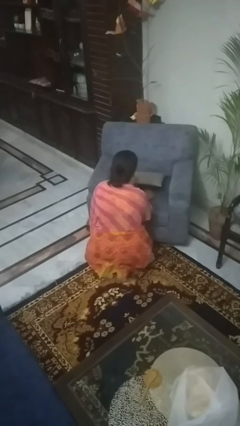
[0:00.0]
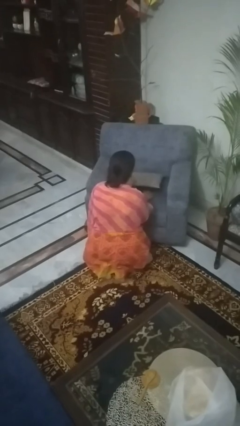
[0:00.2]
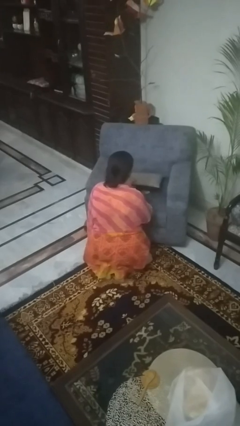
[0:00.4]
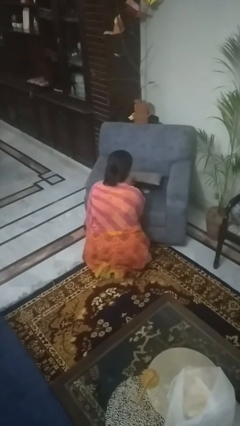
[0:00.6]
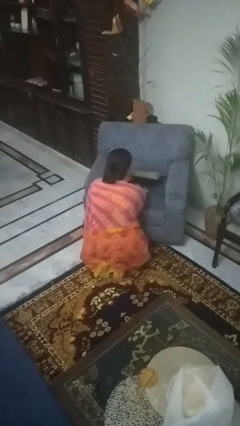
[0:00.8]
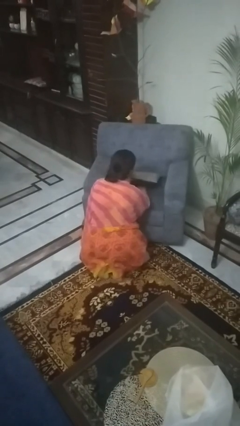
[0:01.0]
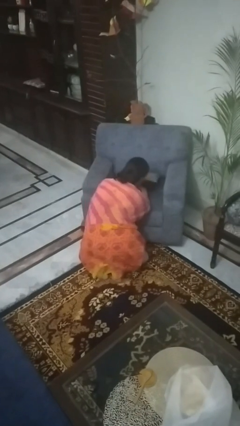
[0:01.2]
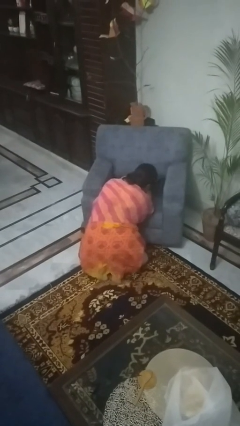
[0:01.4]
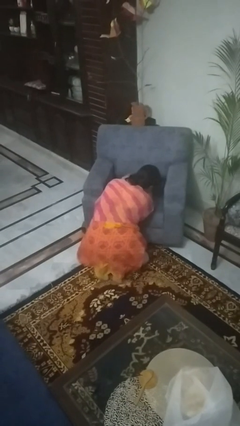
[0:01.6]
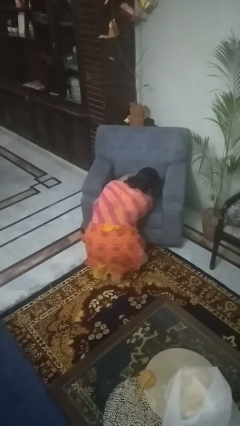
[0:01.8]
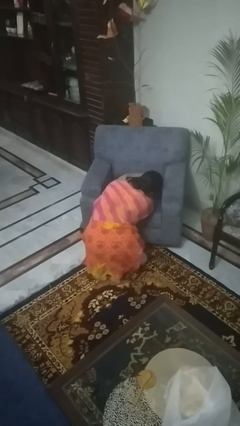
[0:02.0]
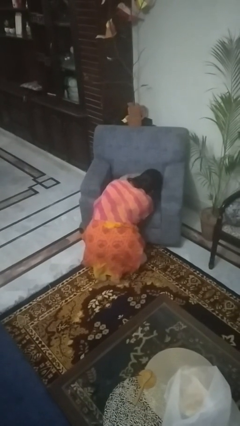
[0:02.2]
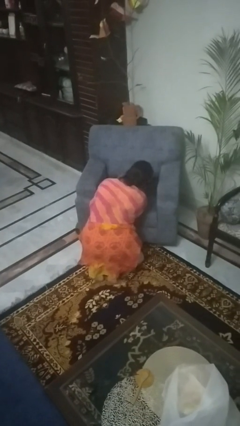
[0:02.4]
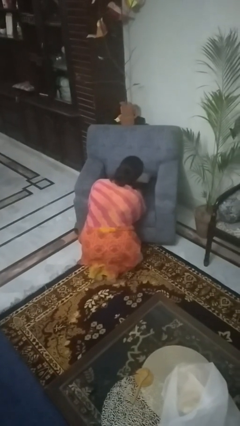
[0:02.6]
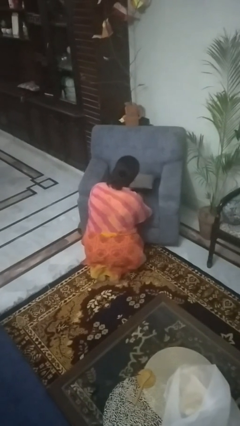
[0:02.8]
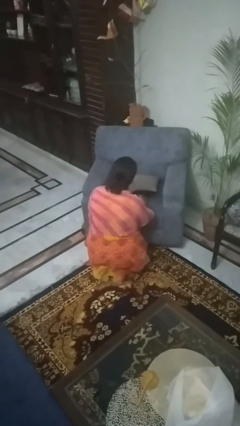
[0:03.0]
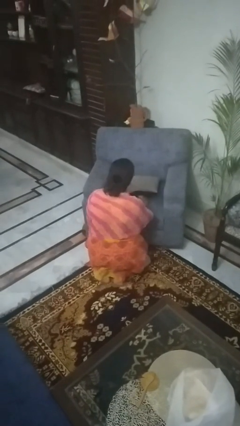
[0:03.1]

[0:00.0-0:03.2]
person searches in couch

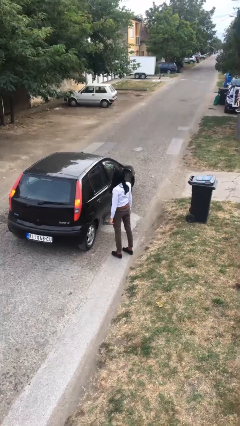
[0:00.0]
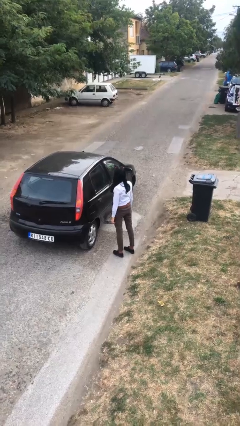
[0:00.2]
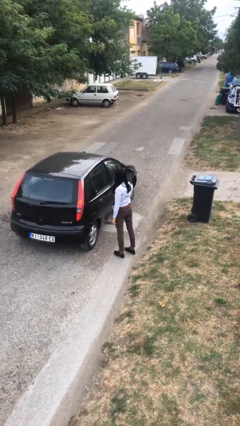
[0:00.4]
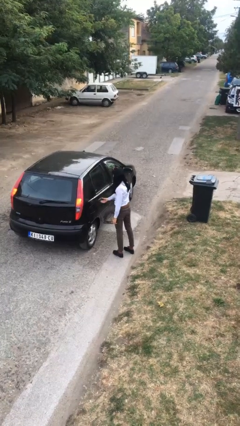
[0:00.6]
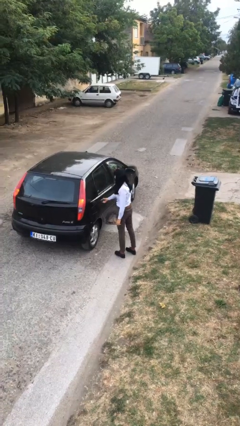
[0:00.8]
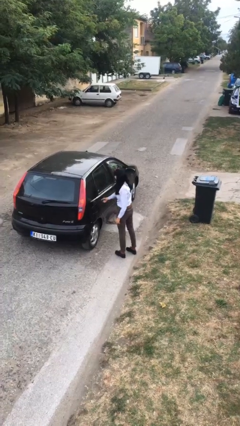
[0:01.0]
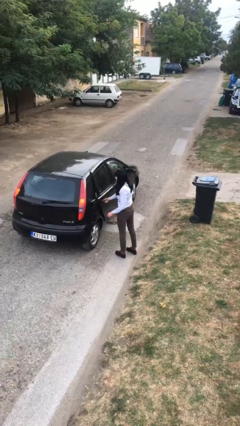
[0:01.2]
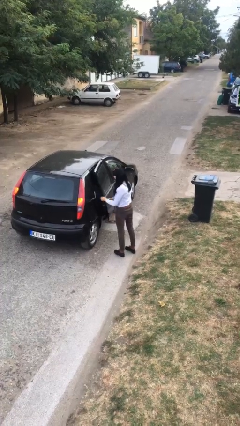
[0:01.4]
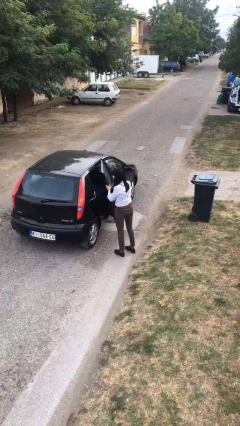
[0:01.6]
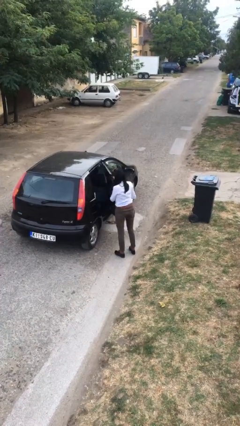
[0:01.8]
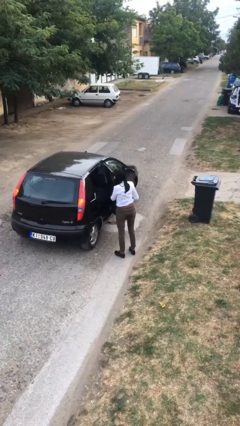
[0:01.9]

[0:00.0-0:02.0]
person opens car door

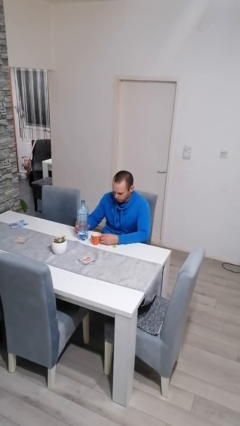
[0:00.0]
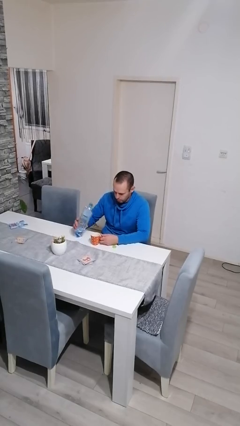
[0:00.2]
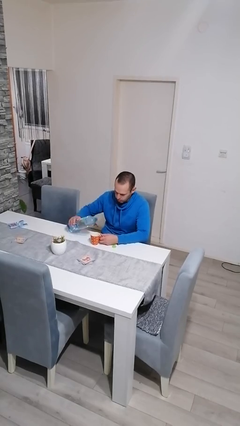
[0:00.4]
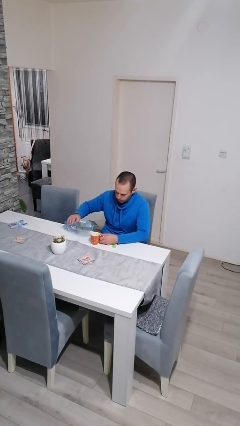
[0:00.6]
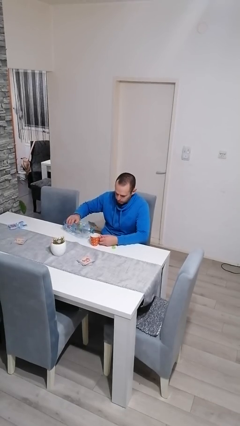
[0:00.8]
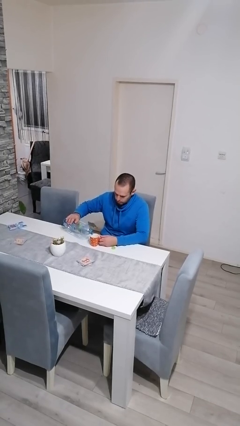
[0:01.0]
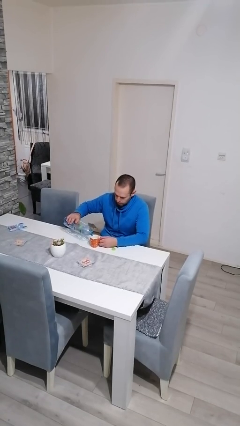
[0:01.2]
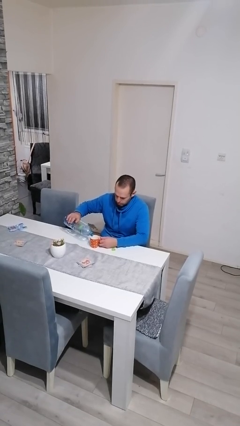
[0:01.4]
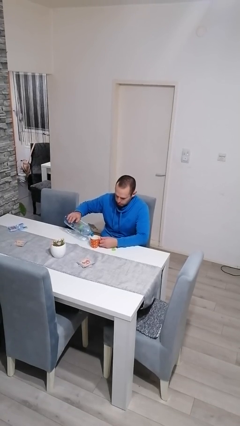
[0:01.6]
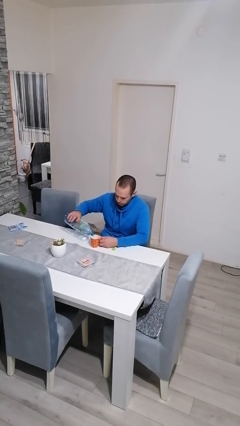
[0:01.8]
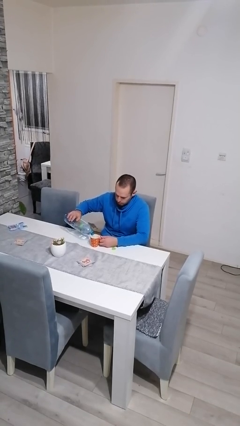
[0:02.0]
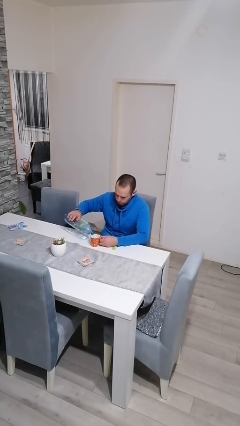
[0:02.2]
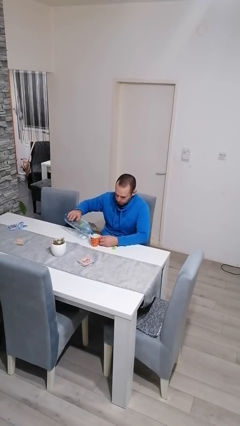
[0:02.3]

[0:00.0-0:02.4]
person pours liquid into cup

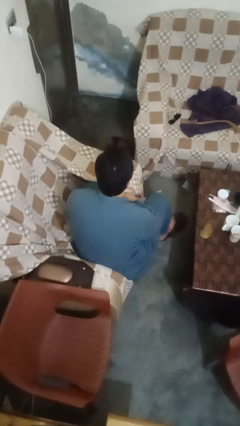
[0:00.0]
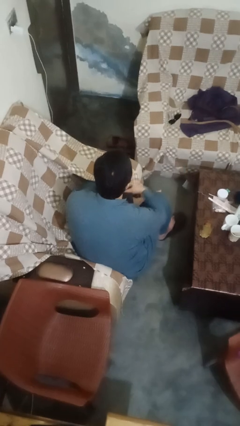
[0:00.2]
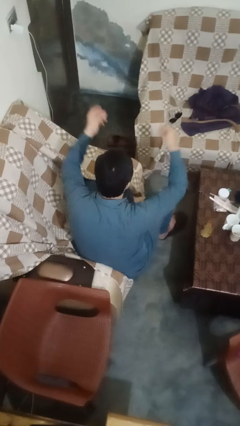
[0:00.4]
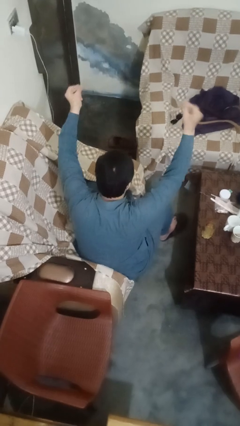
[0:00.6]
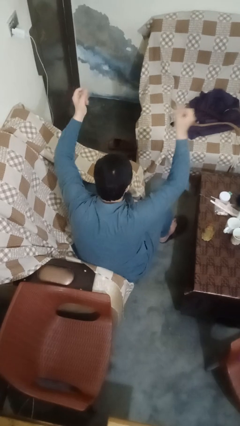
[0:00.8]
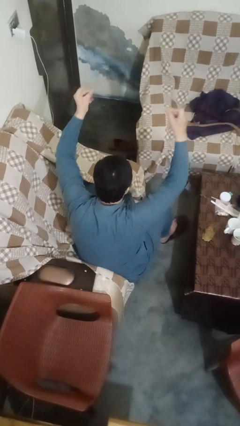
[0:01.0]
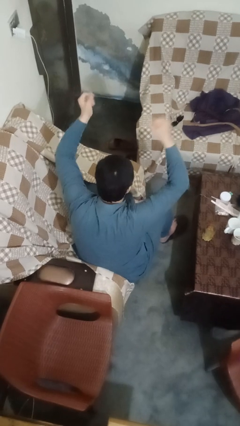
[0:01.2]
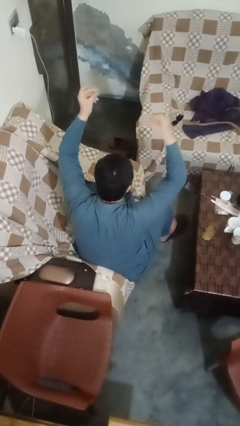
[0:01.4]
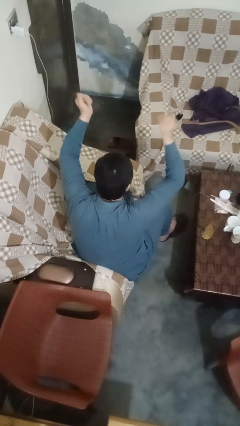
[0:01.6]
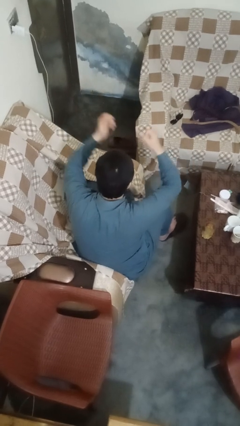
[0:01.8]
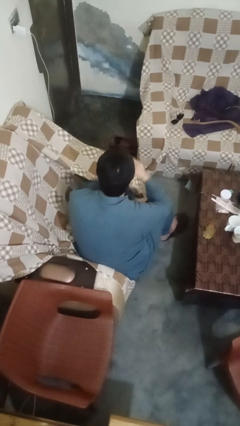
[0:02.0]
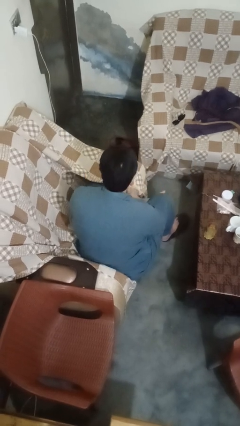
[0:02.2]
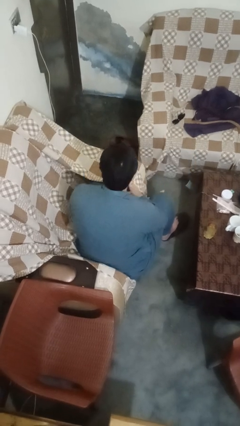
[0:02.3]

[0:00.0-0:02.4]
person snaps fingers

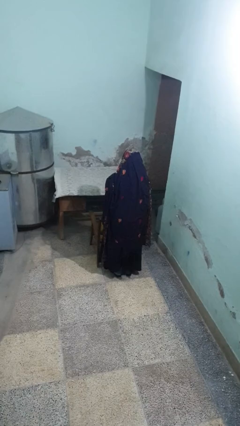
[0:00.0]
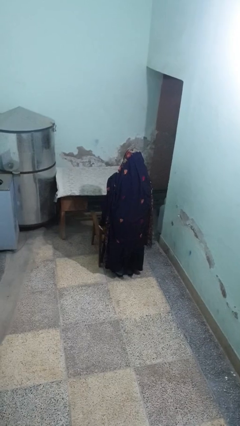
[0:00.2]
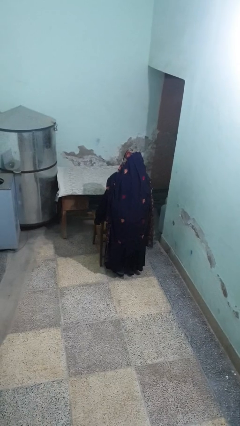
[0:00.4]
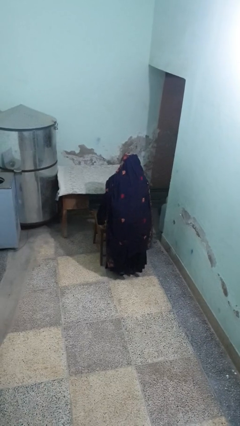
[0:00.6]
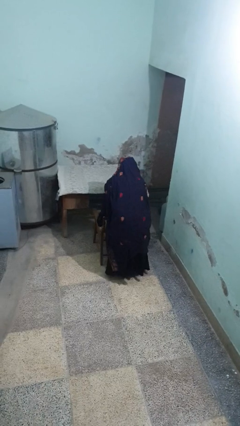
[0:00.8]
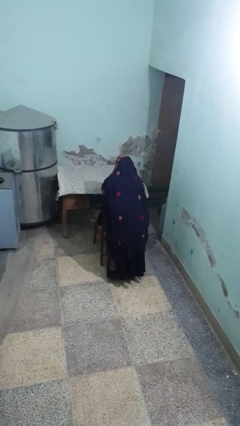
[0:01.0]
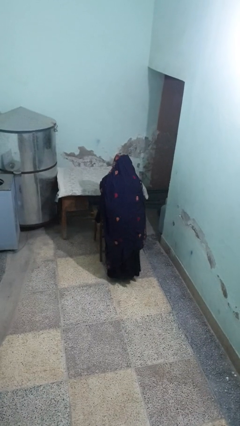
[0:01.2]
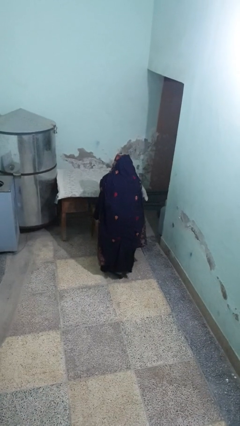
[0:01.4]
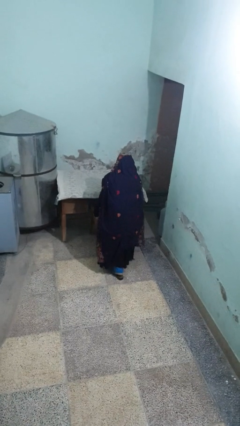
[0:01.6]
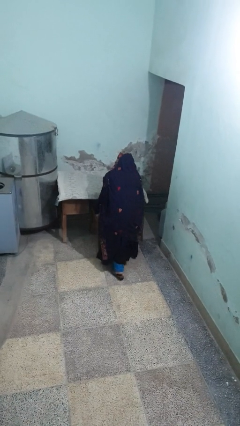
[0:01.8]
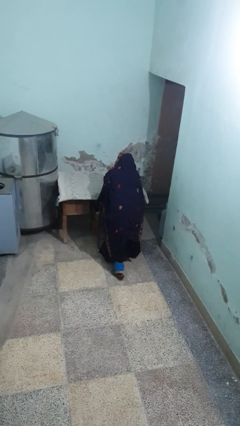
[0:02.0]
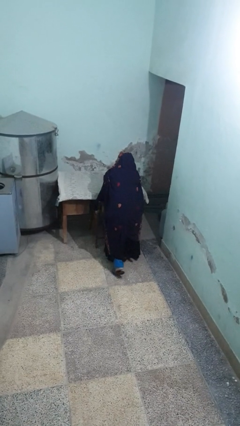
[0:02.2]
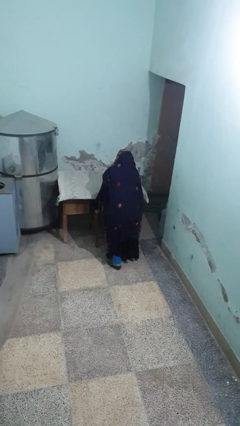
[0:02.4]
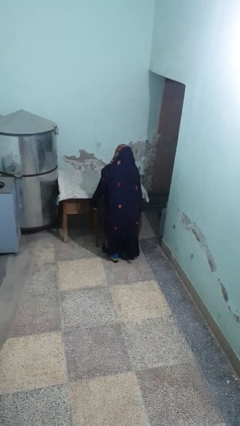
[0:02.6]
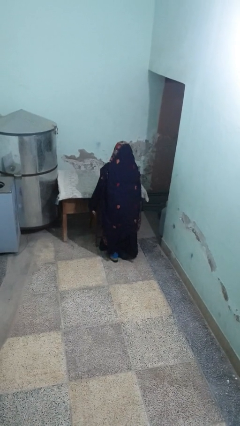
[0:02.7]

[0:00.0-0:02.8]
person pushes in chair

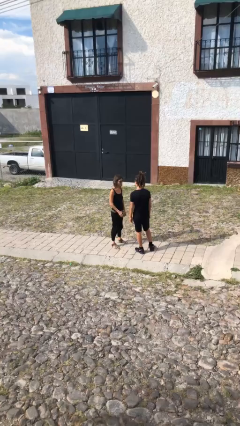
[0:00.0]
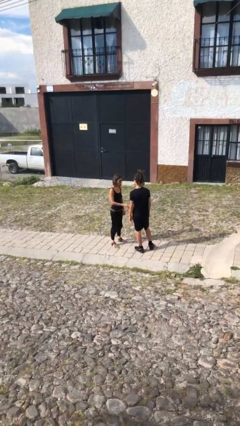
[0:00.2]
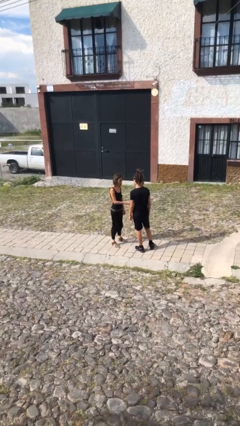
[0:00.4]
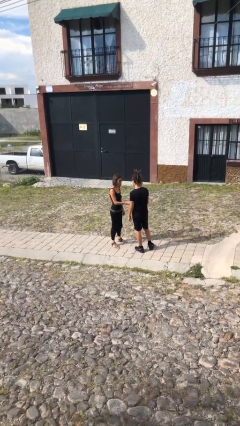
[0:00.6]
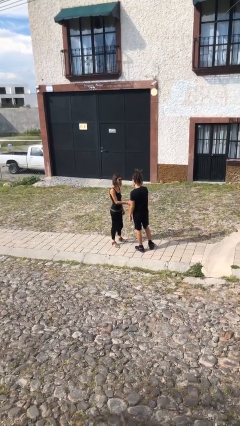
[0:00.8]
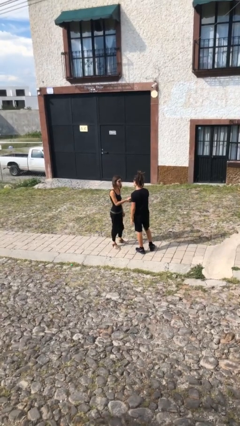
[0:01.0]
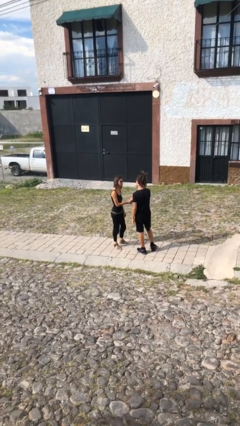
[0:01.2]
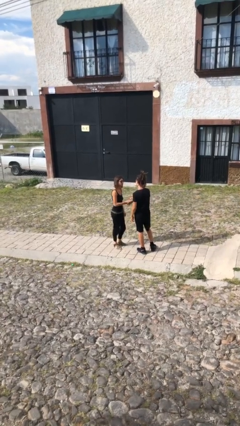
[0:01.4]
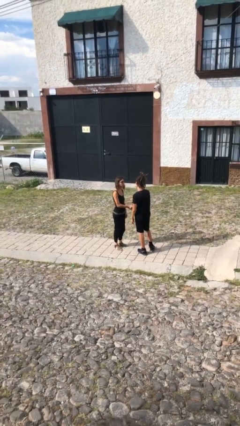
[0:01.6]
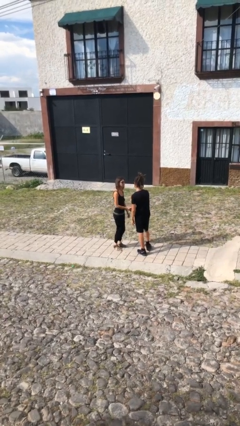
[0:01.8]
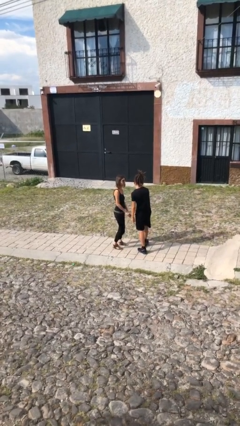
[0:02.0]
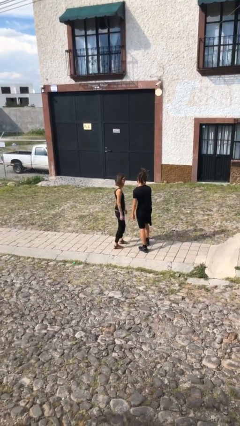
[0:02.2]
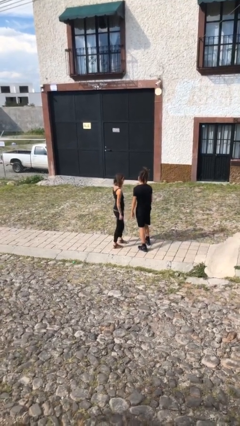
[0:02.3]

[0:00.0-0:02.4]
person shakes hand

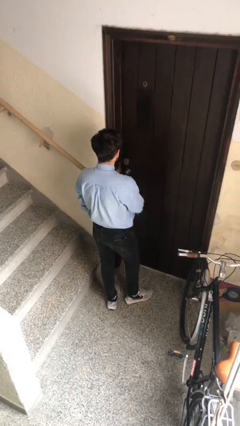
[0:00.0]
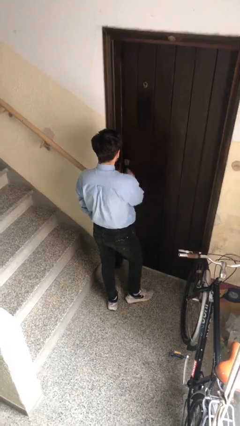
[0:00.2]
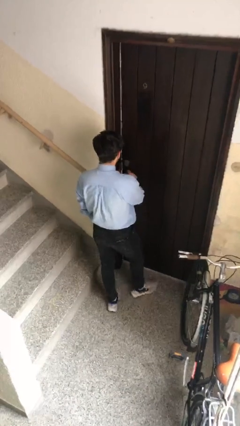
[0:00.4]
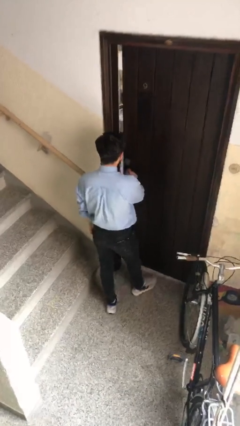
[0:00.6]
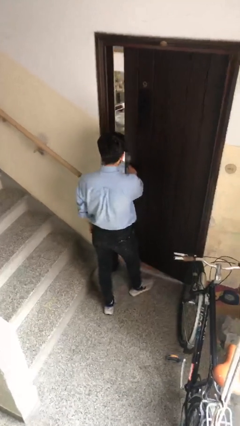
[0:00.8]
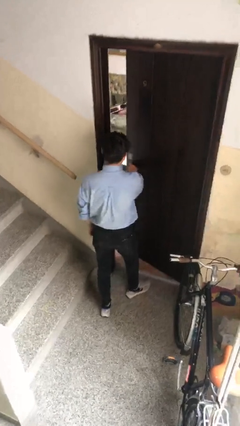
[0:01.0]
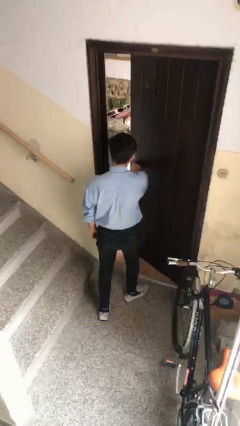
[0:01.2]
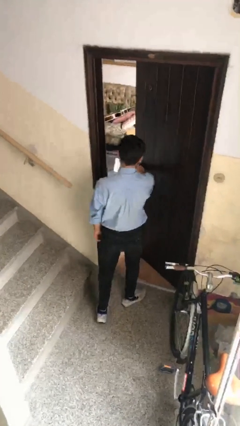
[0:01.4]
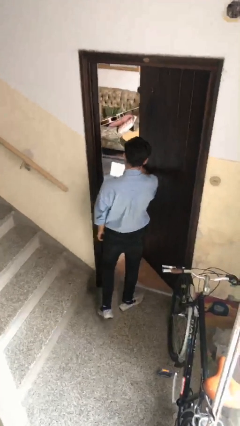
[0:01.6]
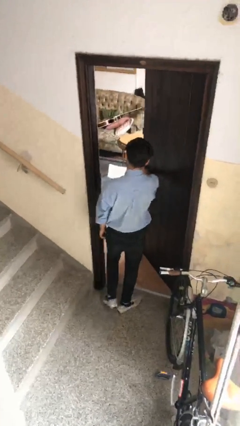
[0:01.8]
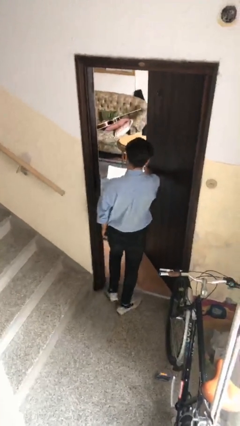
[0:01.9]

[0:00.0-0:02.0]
person opens facility door

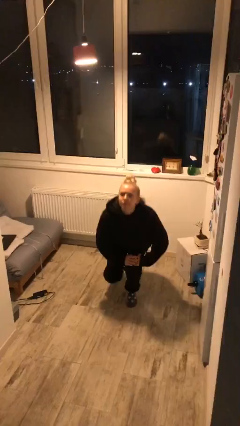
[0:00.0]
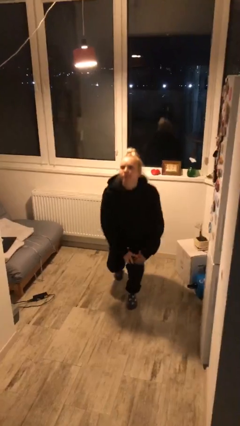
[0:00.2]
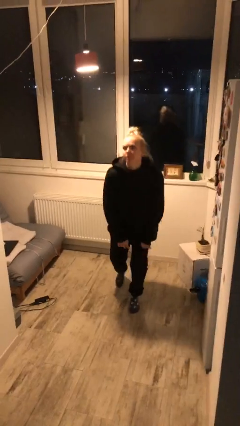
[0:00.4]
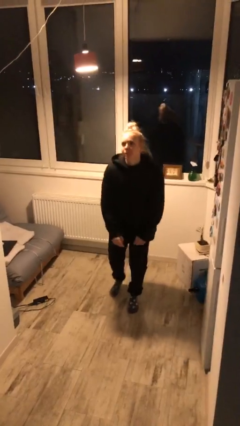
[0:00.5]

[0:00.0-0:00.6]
person stands up
